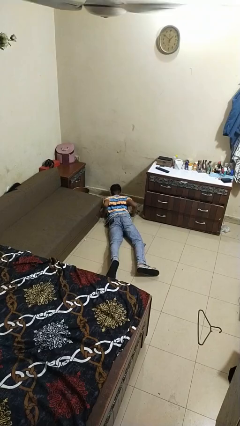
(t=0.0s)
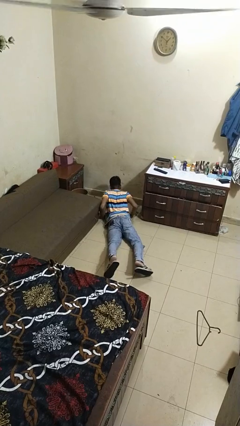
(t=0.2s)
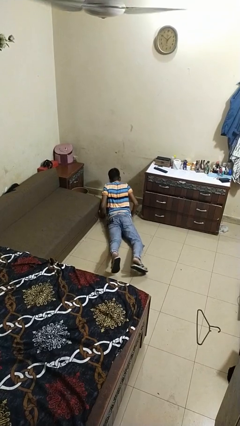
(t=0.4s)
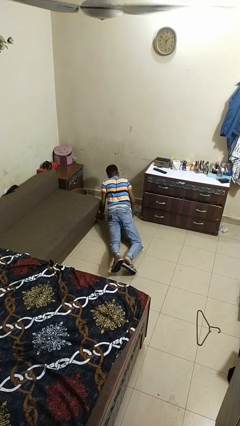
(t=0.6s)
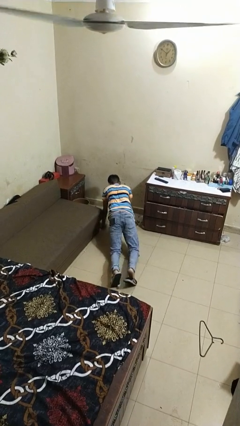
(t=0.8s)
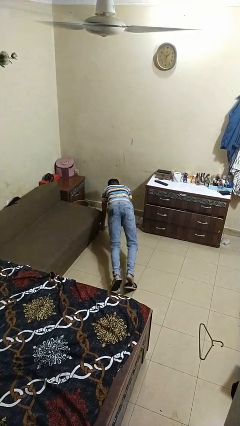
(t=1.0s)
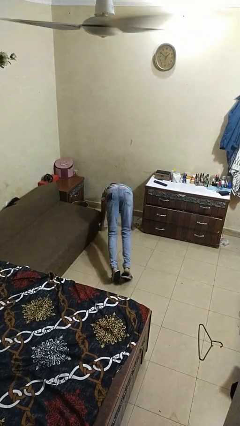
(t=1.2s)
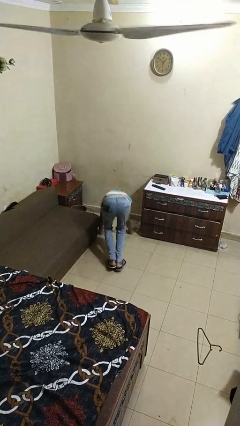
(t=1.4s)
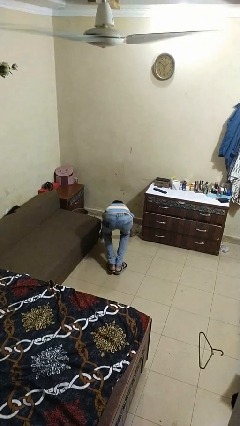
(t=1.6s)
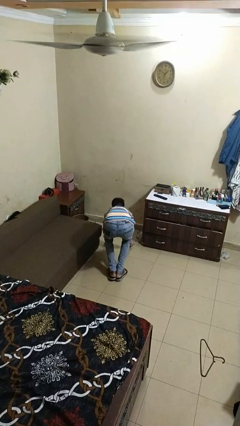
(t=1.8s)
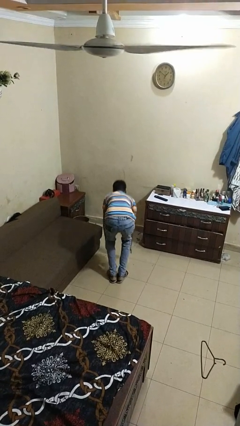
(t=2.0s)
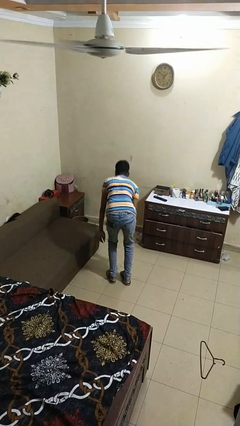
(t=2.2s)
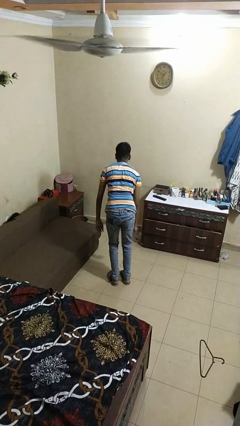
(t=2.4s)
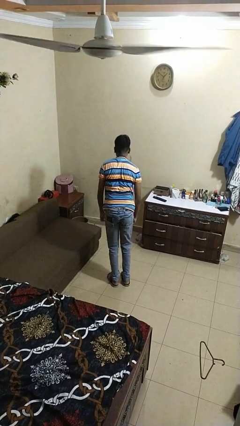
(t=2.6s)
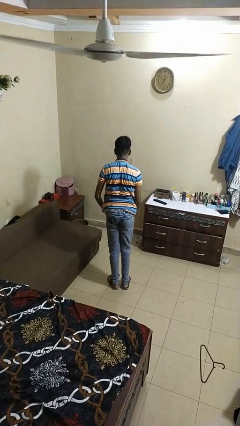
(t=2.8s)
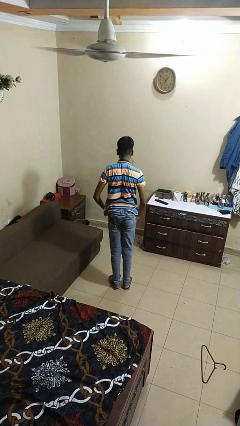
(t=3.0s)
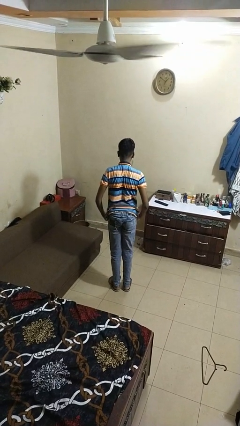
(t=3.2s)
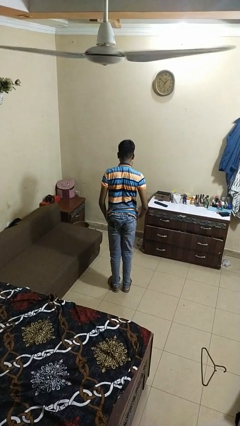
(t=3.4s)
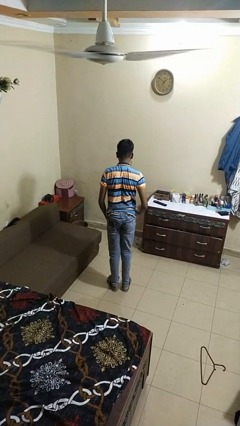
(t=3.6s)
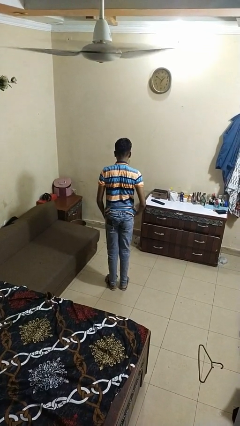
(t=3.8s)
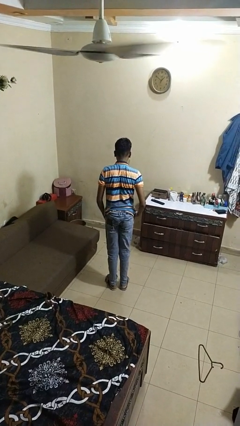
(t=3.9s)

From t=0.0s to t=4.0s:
person stands up from floor

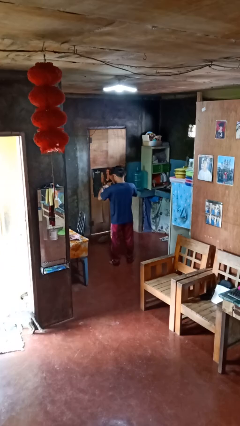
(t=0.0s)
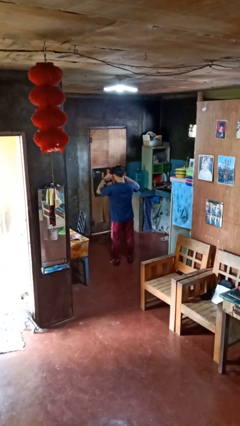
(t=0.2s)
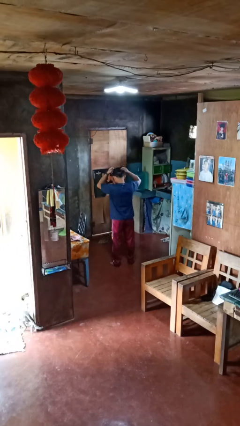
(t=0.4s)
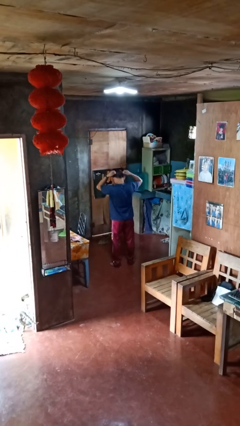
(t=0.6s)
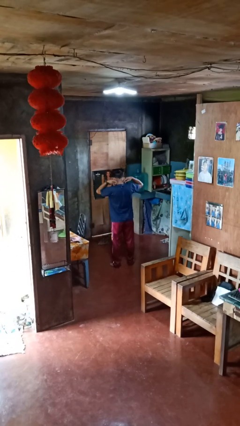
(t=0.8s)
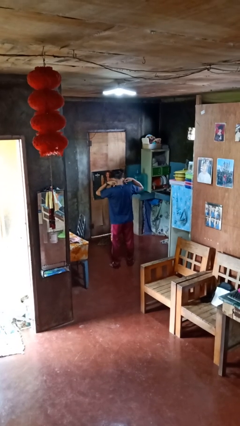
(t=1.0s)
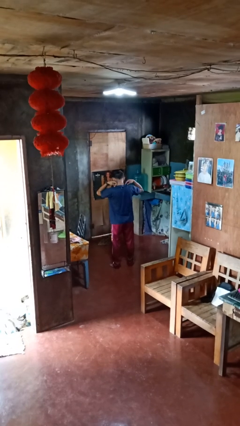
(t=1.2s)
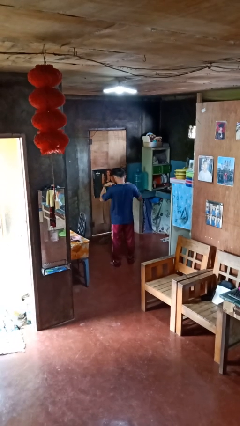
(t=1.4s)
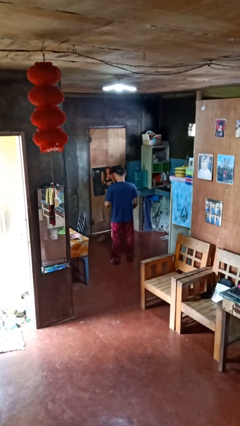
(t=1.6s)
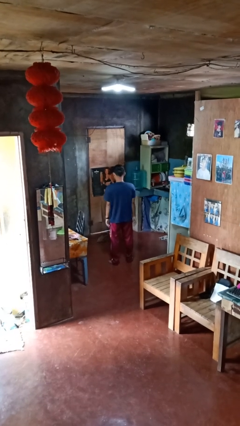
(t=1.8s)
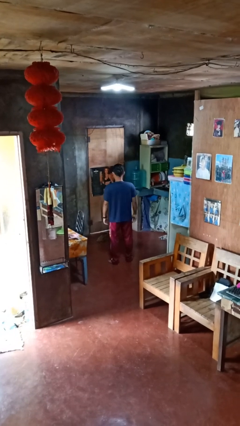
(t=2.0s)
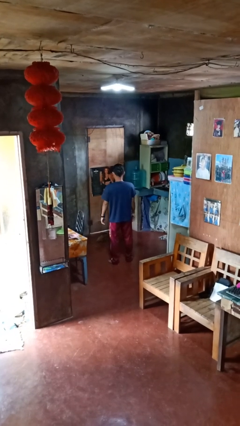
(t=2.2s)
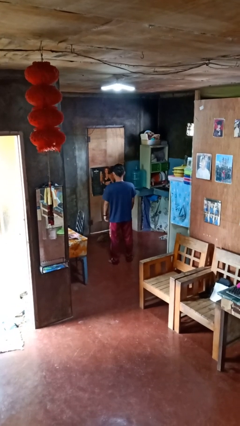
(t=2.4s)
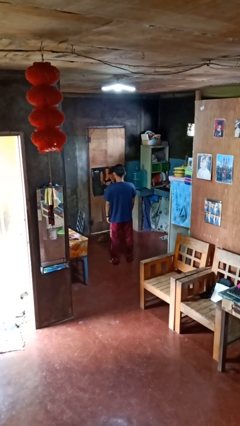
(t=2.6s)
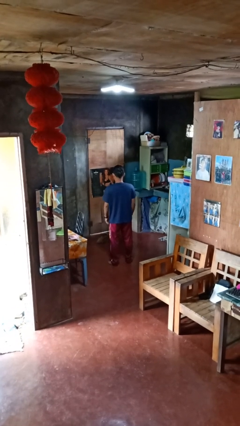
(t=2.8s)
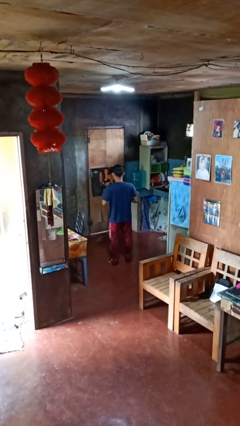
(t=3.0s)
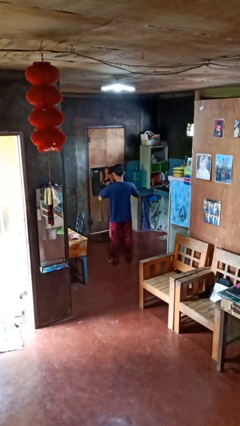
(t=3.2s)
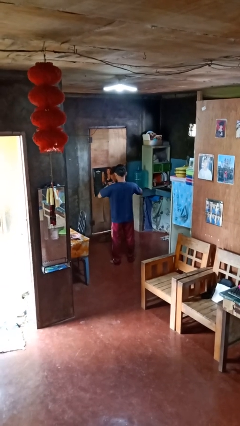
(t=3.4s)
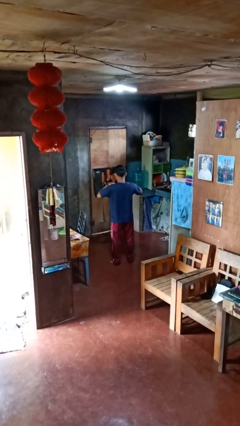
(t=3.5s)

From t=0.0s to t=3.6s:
person puts on necklace

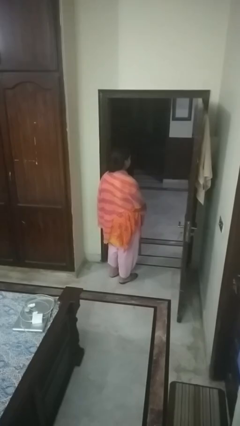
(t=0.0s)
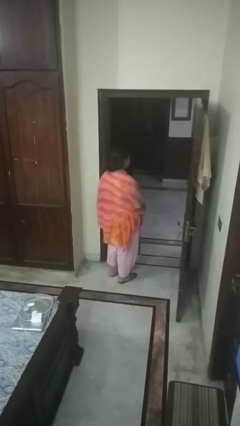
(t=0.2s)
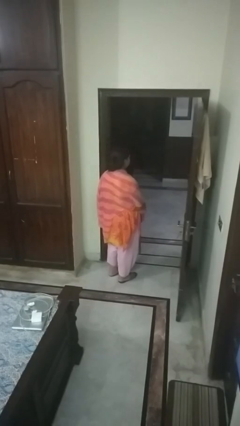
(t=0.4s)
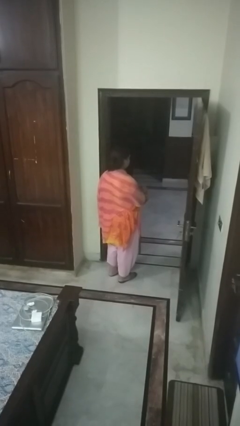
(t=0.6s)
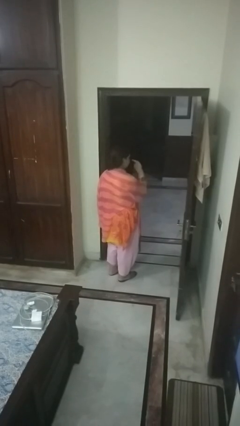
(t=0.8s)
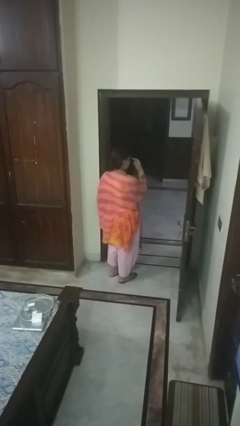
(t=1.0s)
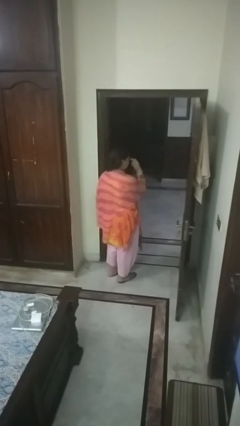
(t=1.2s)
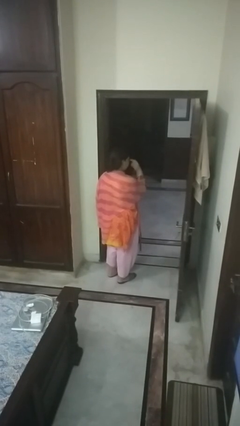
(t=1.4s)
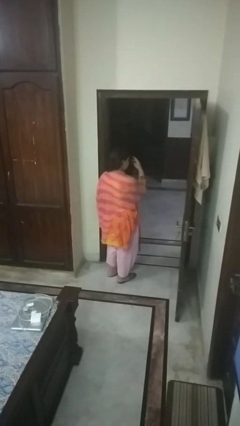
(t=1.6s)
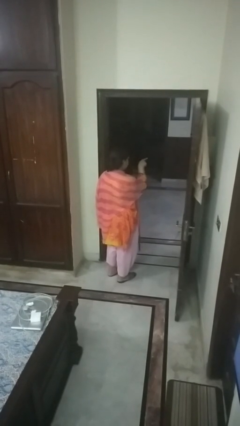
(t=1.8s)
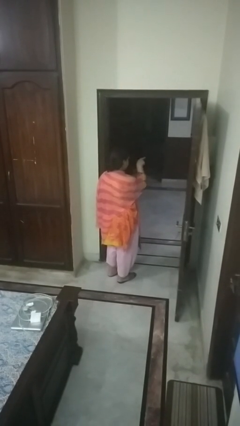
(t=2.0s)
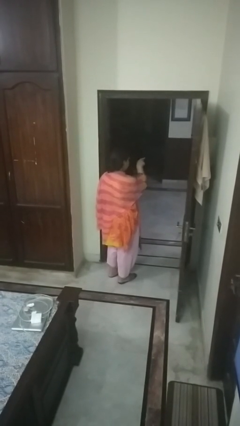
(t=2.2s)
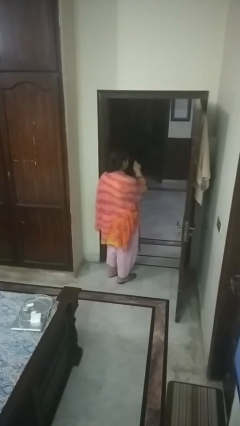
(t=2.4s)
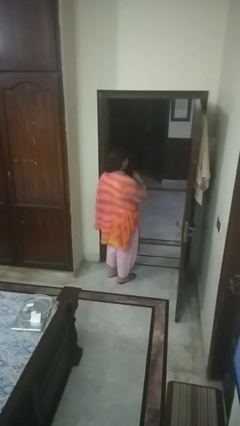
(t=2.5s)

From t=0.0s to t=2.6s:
person gestures watch closely

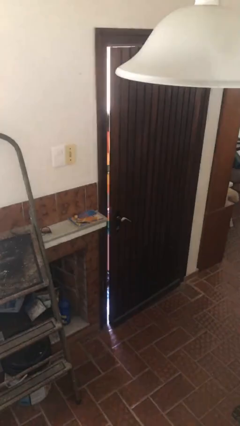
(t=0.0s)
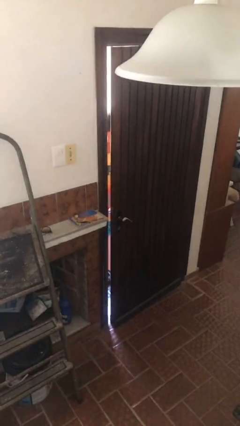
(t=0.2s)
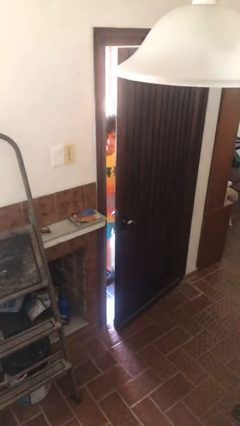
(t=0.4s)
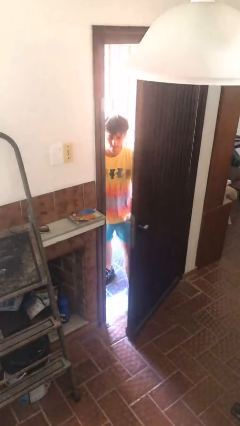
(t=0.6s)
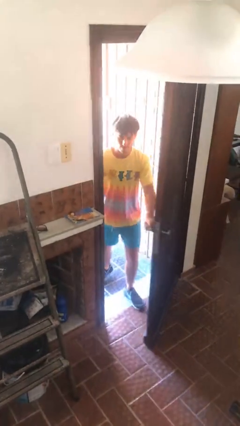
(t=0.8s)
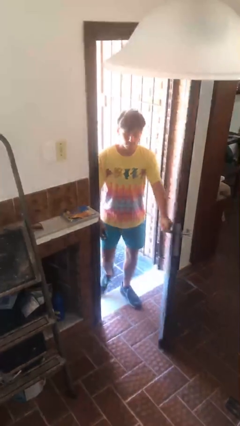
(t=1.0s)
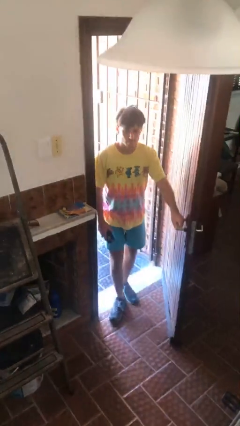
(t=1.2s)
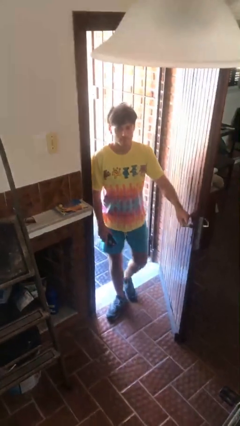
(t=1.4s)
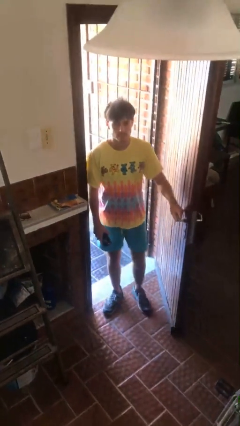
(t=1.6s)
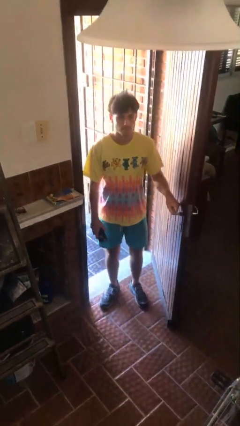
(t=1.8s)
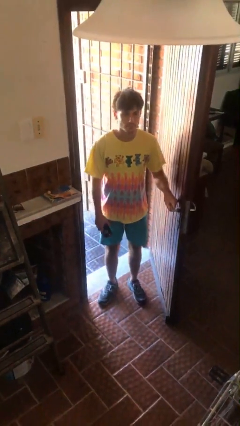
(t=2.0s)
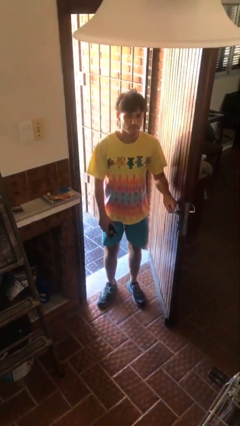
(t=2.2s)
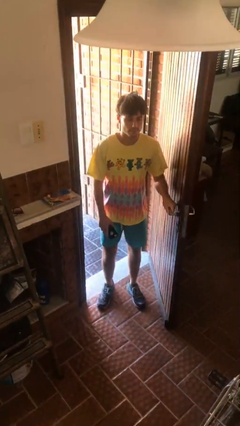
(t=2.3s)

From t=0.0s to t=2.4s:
person opens facility door

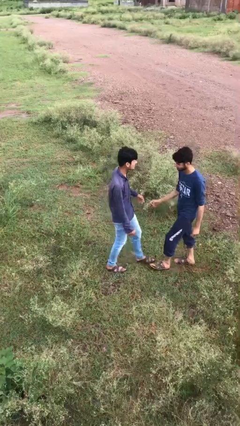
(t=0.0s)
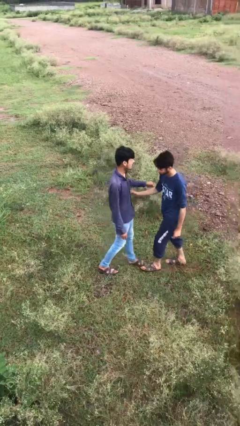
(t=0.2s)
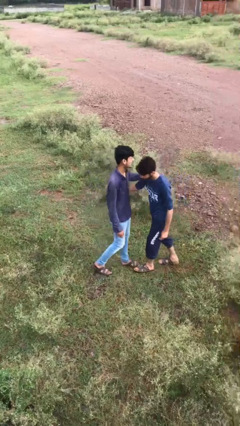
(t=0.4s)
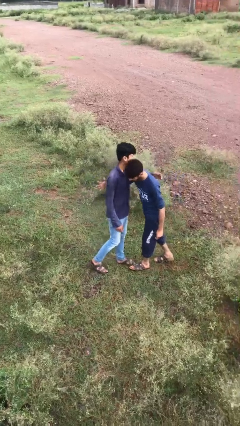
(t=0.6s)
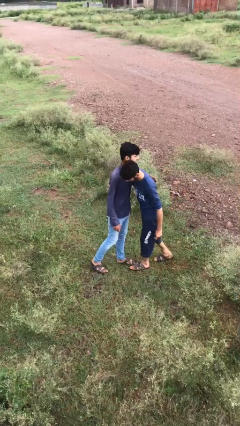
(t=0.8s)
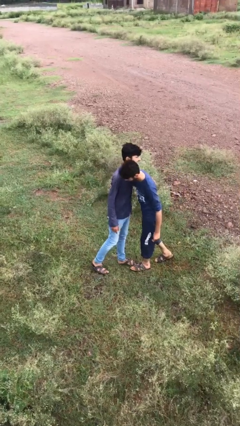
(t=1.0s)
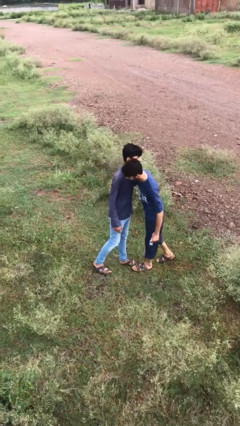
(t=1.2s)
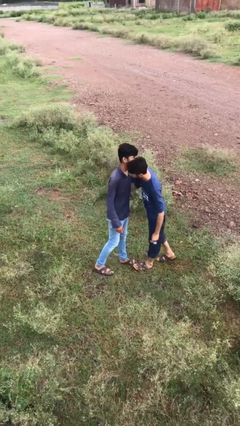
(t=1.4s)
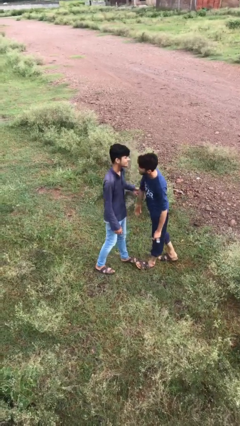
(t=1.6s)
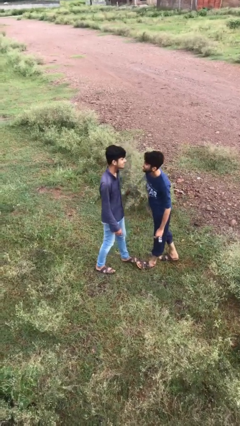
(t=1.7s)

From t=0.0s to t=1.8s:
person embraces person

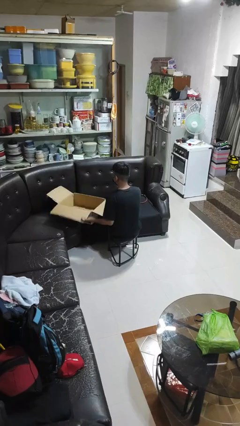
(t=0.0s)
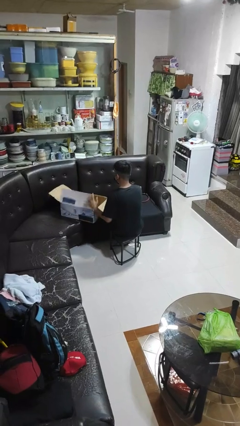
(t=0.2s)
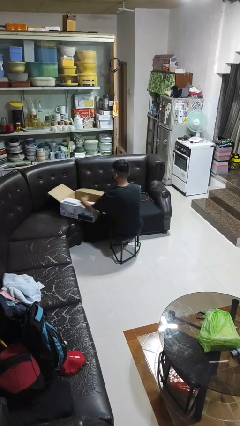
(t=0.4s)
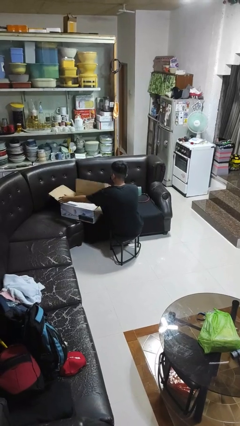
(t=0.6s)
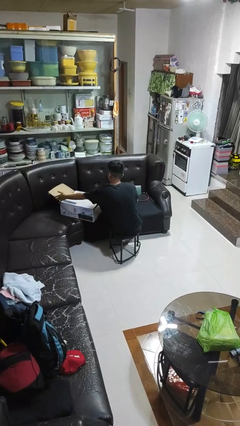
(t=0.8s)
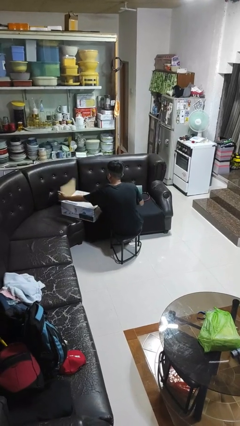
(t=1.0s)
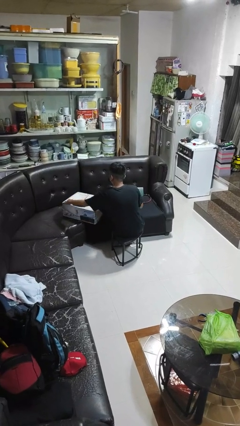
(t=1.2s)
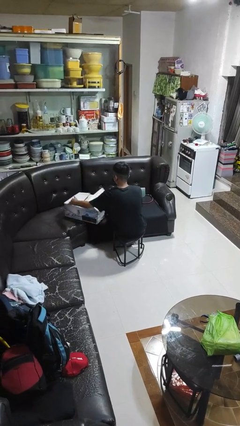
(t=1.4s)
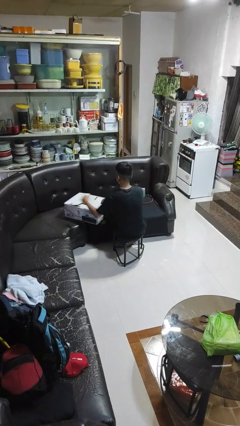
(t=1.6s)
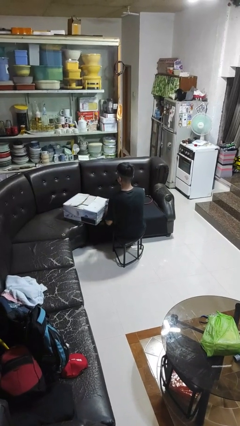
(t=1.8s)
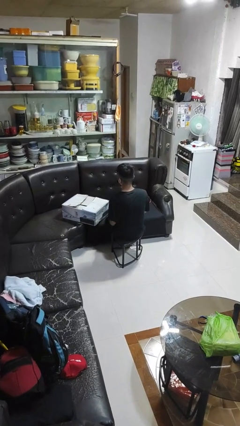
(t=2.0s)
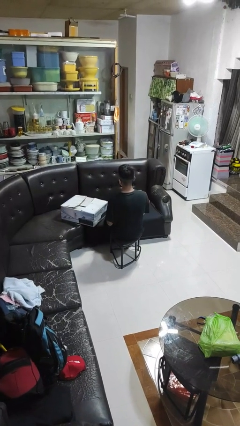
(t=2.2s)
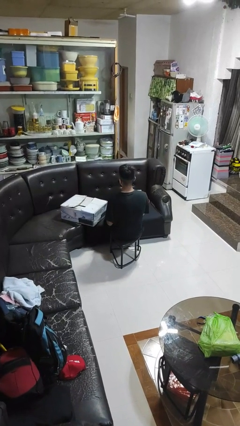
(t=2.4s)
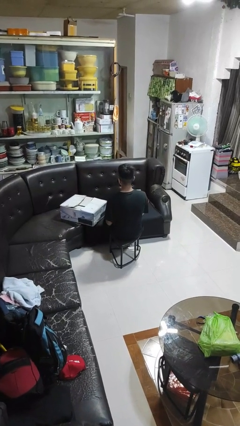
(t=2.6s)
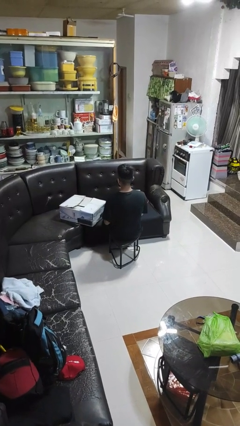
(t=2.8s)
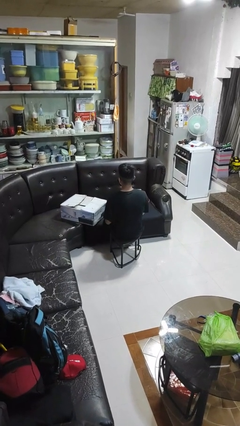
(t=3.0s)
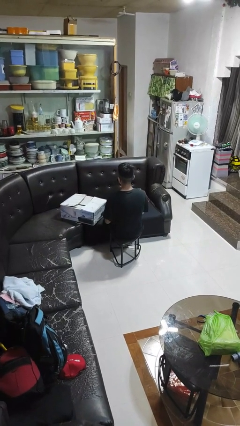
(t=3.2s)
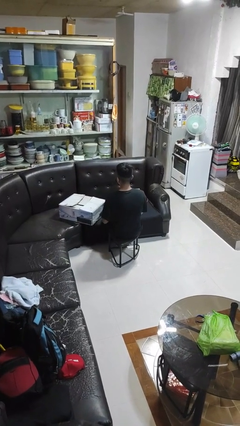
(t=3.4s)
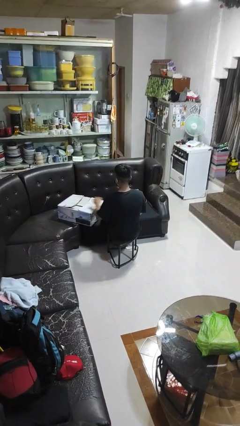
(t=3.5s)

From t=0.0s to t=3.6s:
person closes box
